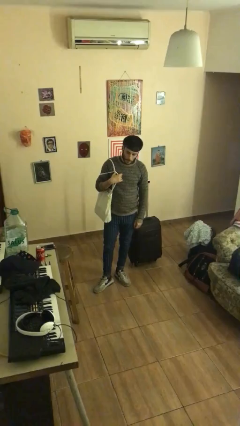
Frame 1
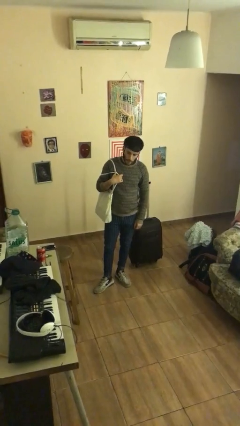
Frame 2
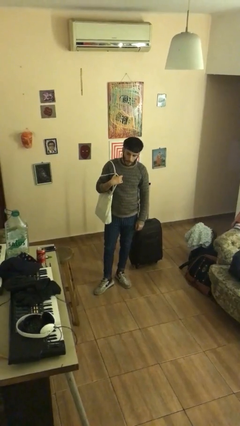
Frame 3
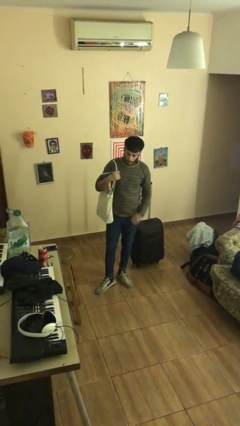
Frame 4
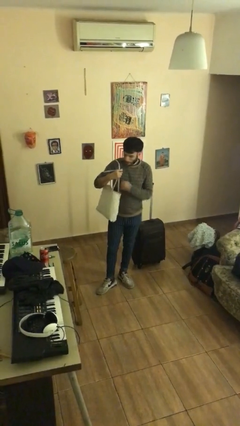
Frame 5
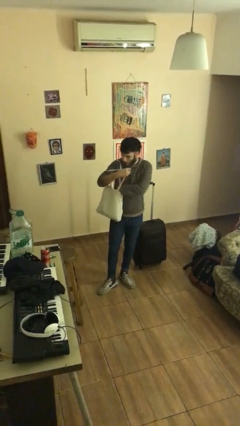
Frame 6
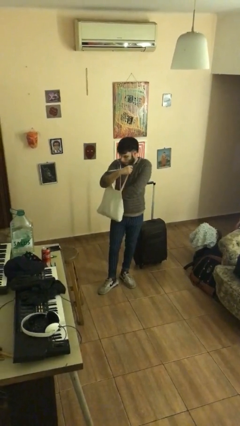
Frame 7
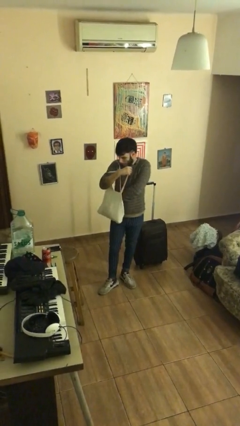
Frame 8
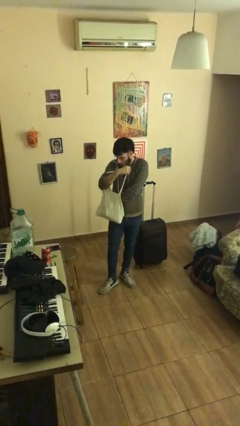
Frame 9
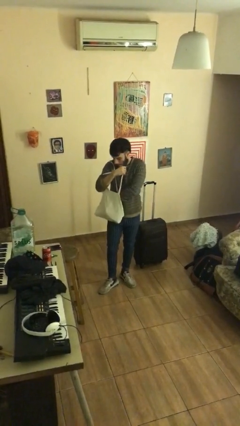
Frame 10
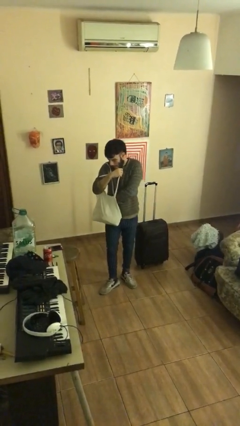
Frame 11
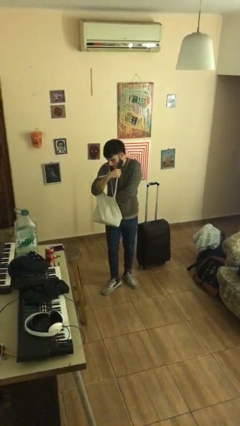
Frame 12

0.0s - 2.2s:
person searches in purse

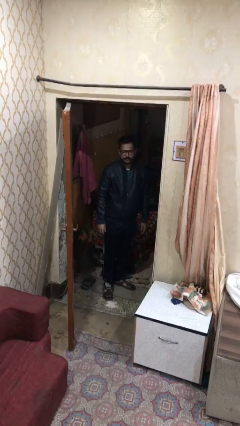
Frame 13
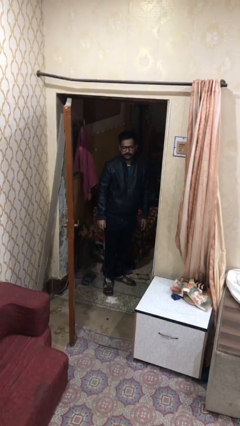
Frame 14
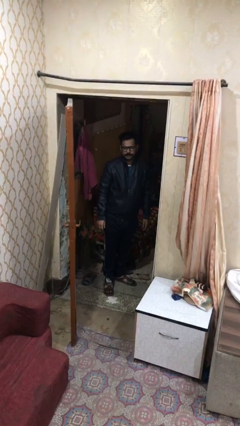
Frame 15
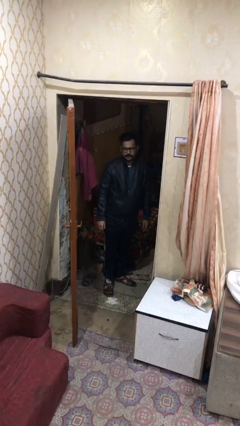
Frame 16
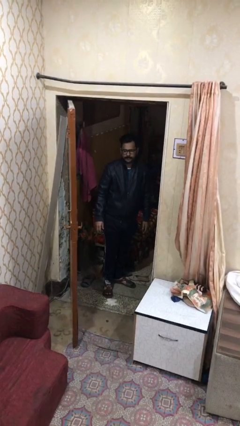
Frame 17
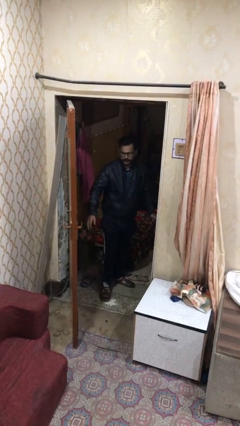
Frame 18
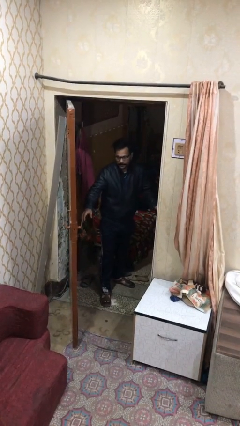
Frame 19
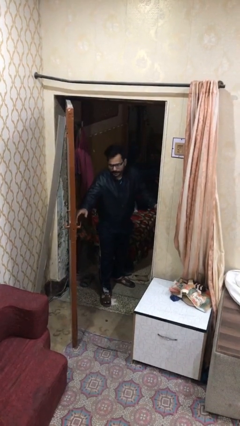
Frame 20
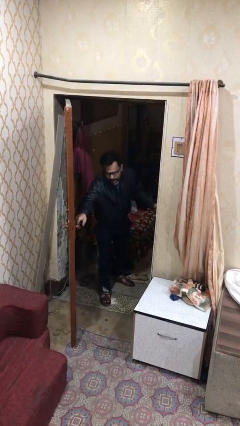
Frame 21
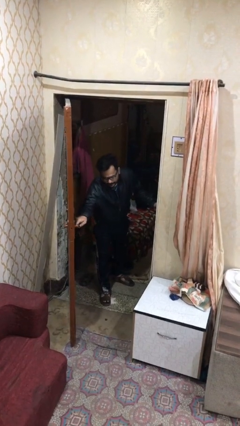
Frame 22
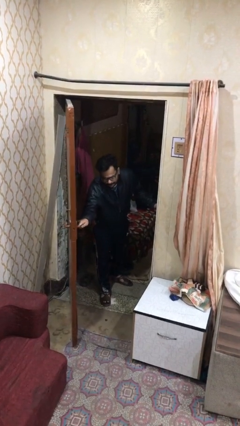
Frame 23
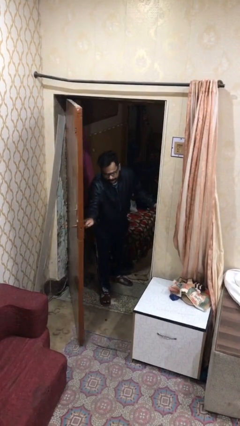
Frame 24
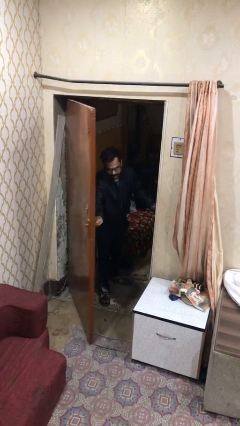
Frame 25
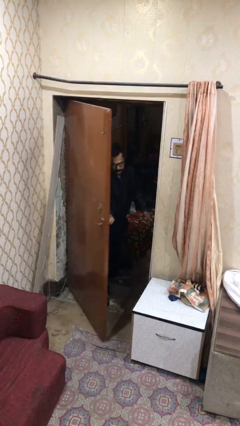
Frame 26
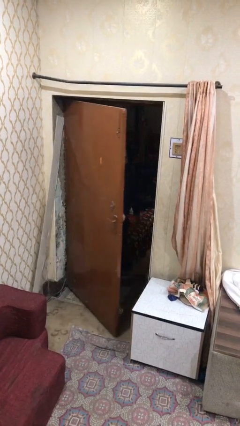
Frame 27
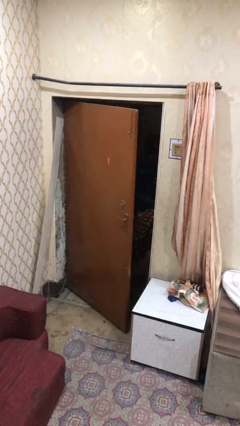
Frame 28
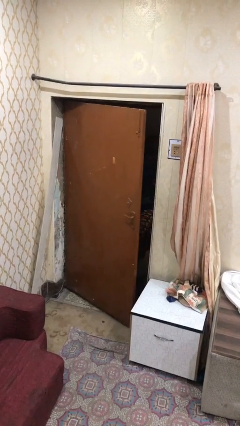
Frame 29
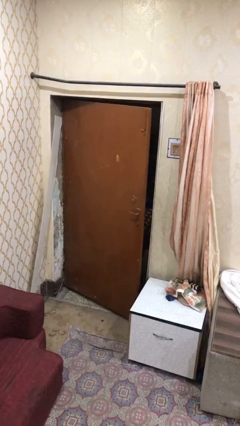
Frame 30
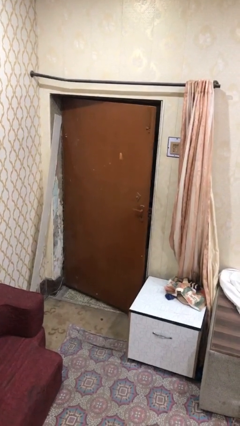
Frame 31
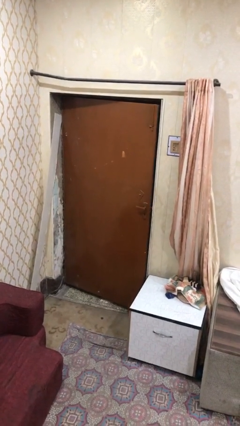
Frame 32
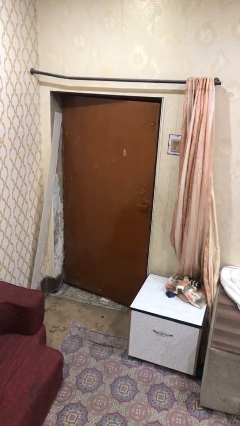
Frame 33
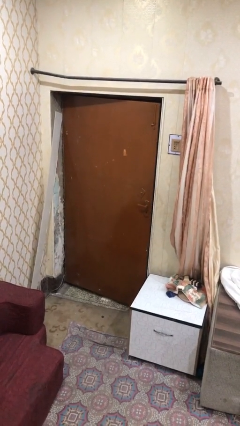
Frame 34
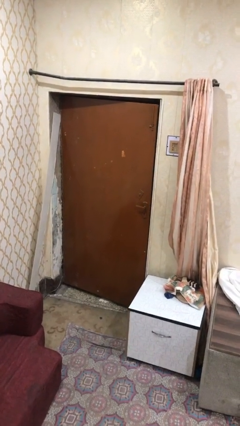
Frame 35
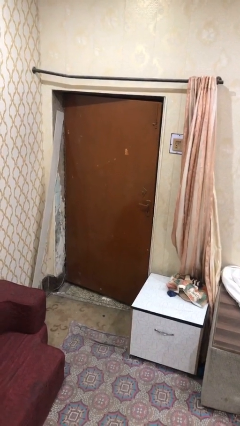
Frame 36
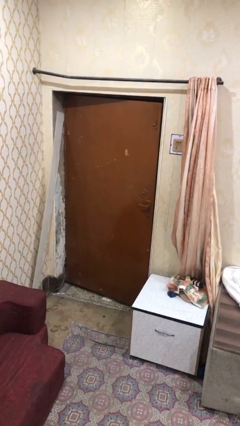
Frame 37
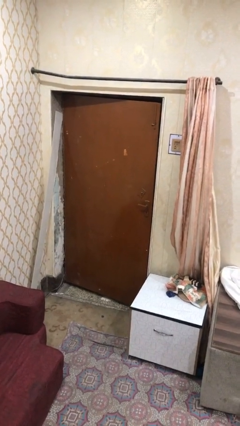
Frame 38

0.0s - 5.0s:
person closes facility door

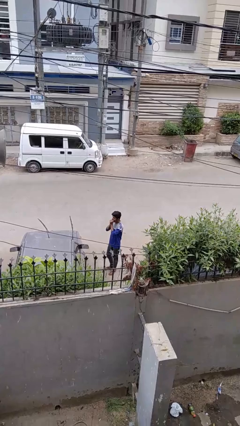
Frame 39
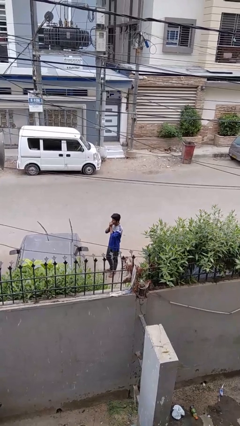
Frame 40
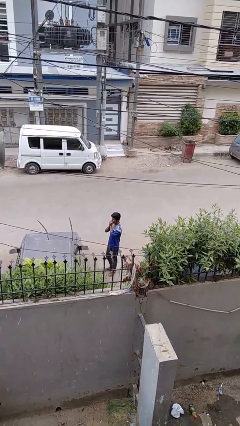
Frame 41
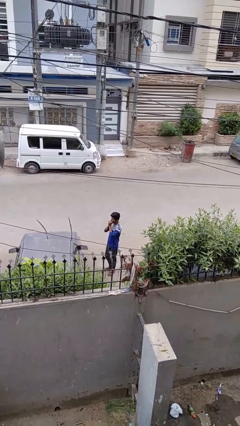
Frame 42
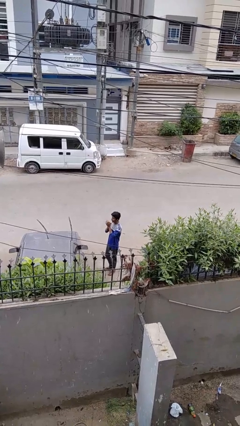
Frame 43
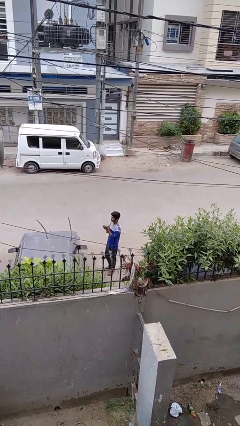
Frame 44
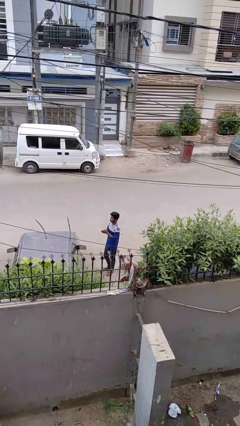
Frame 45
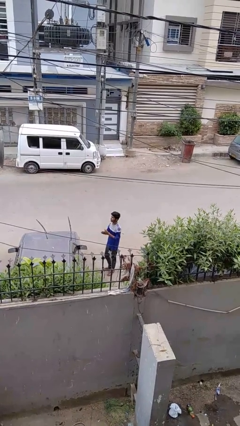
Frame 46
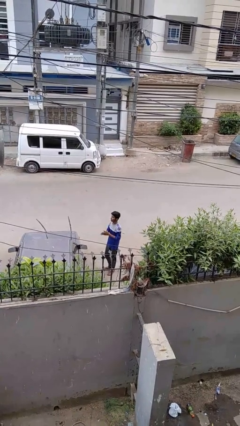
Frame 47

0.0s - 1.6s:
person blows into hands

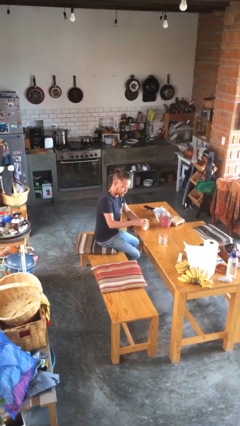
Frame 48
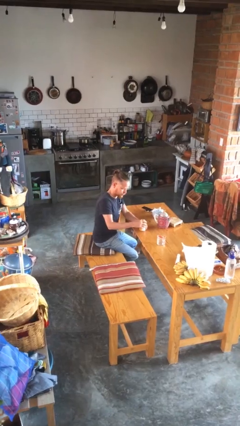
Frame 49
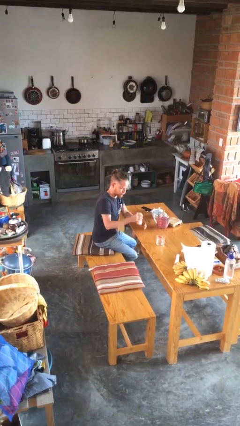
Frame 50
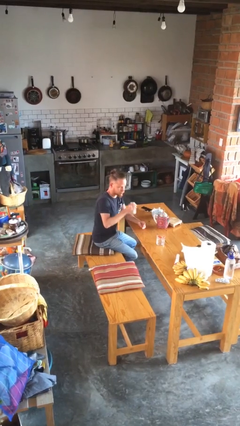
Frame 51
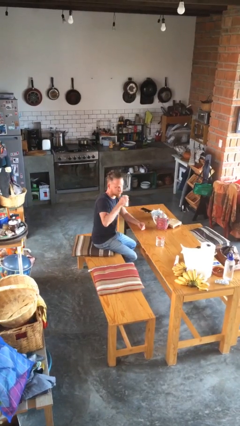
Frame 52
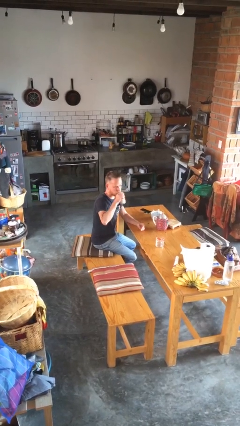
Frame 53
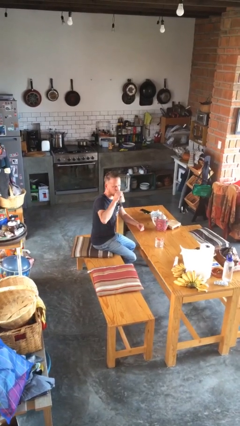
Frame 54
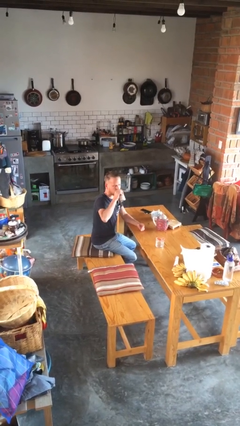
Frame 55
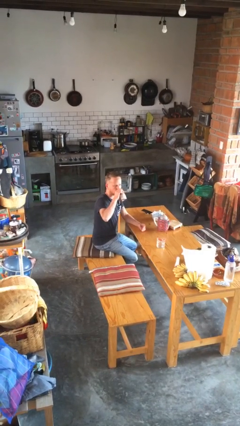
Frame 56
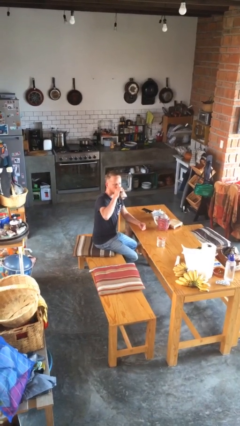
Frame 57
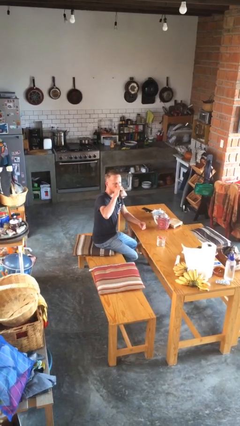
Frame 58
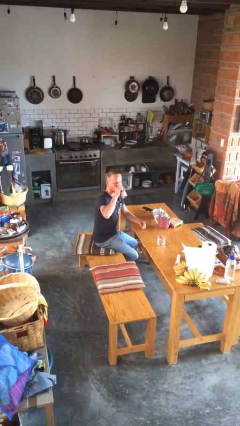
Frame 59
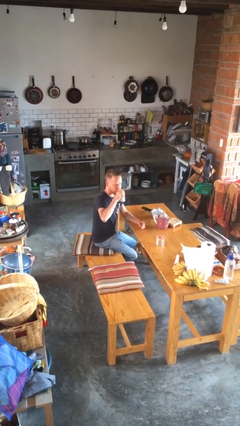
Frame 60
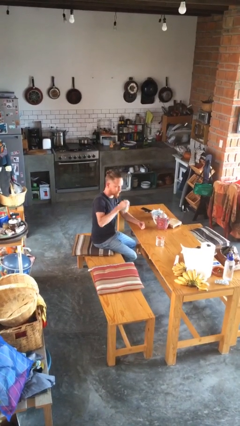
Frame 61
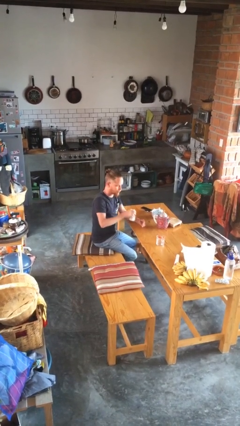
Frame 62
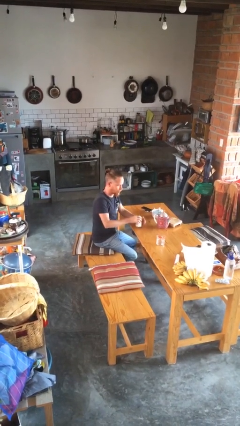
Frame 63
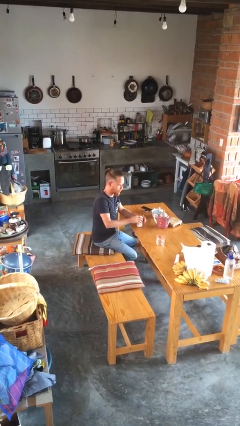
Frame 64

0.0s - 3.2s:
person drinks from beverage can

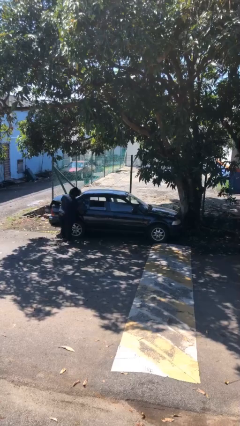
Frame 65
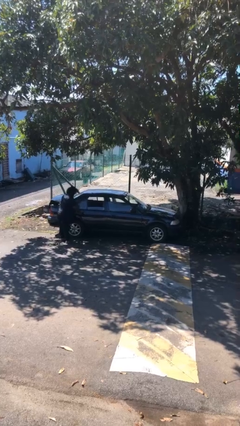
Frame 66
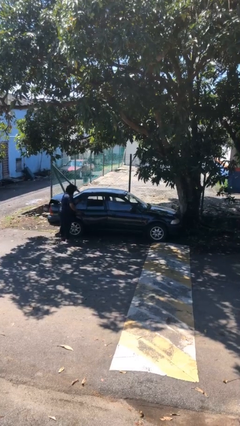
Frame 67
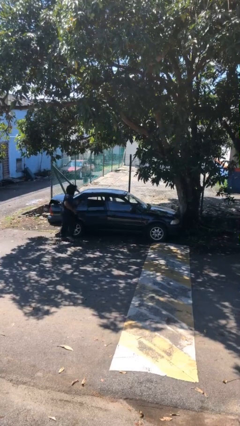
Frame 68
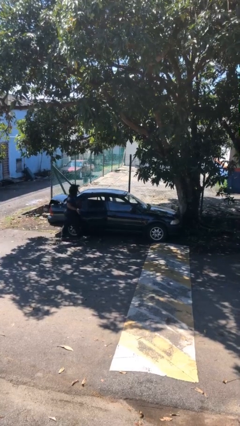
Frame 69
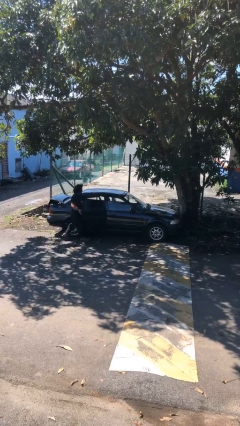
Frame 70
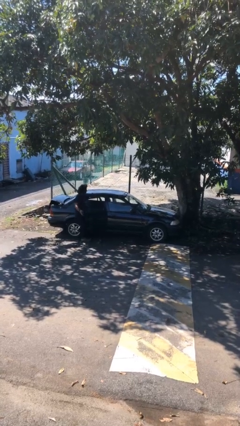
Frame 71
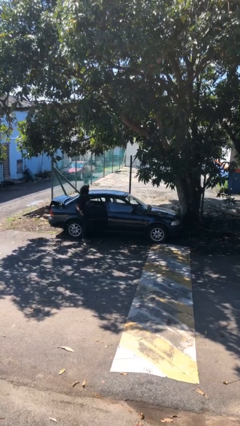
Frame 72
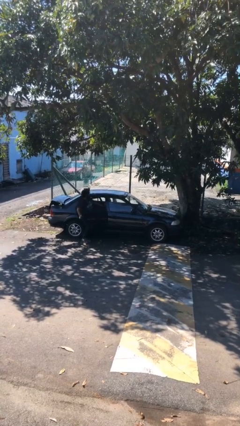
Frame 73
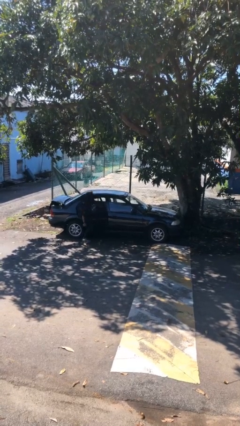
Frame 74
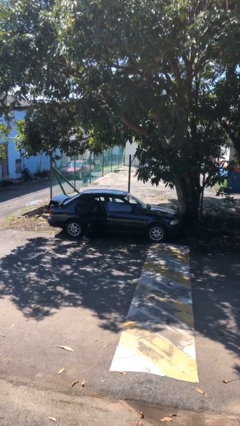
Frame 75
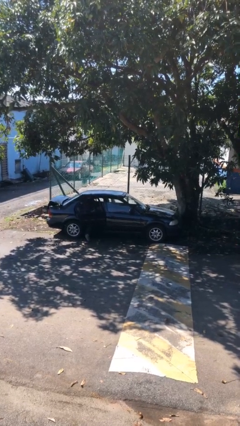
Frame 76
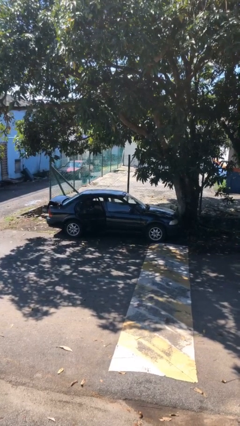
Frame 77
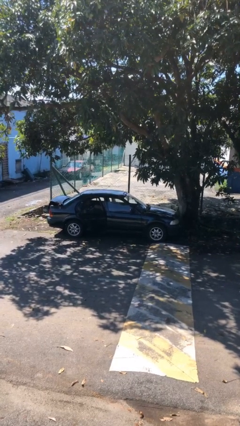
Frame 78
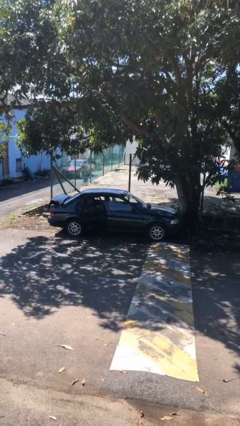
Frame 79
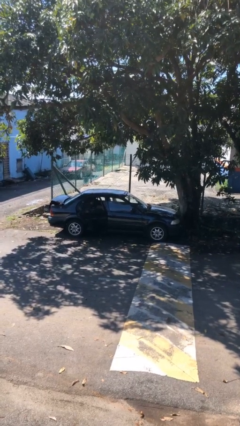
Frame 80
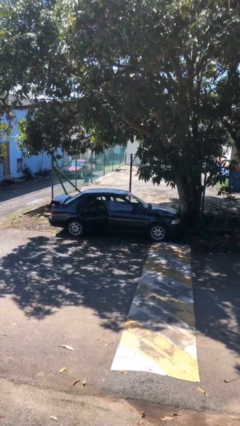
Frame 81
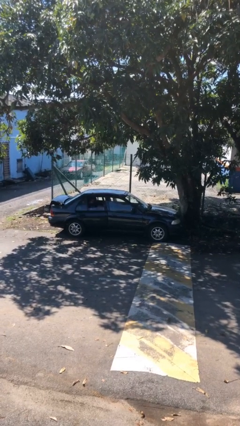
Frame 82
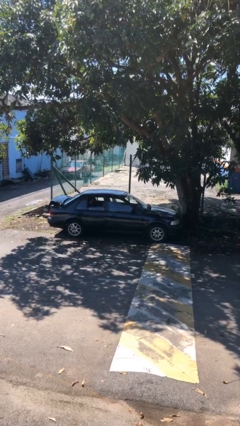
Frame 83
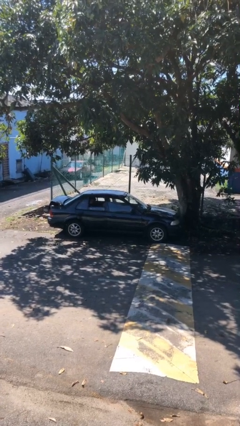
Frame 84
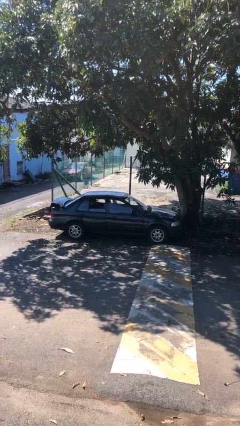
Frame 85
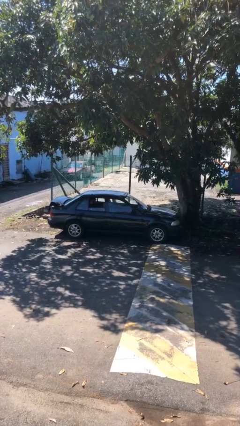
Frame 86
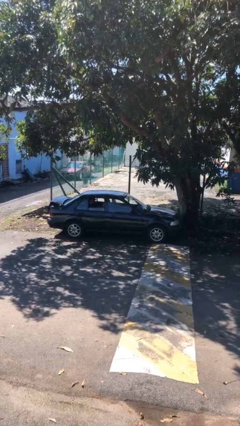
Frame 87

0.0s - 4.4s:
car picks up person

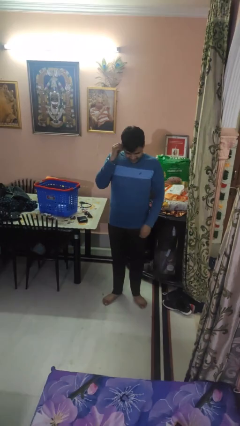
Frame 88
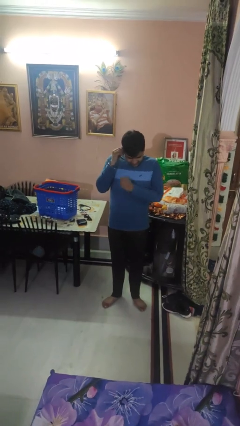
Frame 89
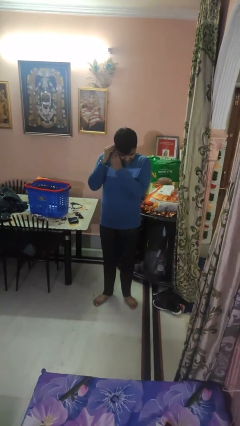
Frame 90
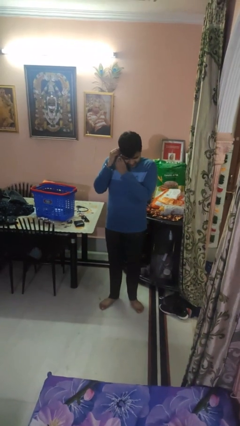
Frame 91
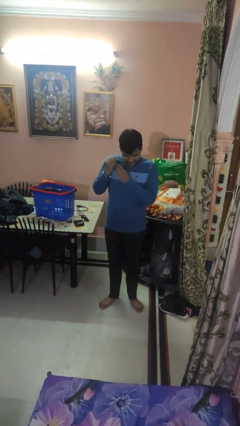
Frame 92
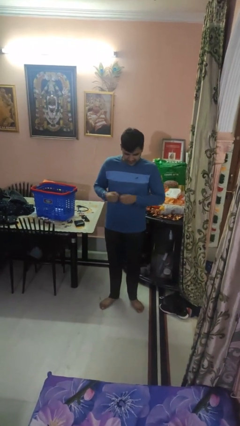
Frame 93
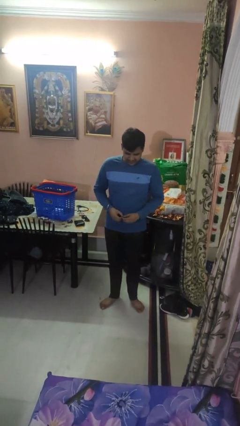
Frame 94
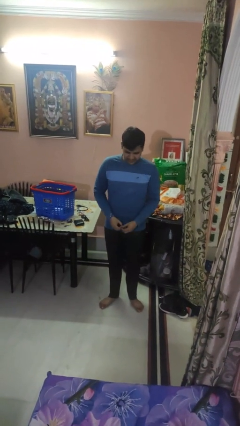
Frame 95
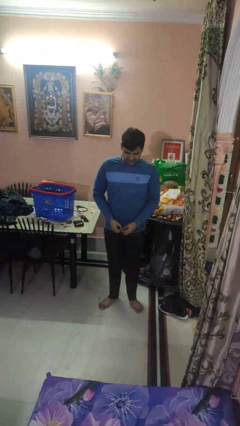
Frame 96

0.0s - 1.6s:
person takes off earrings
